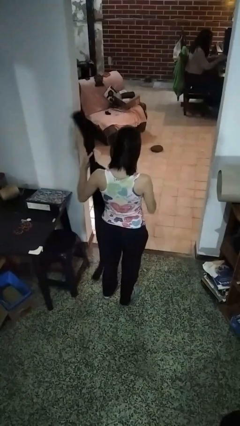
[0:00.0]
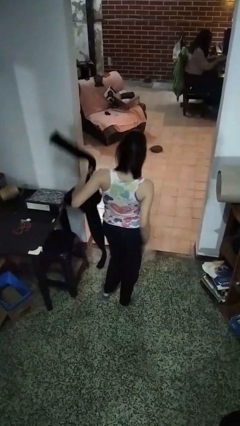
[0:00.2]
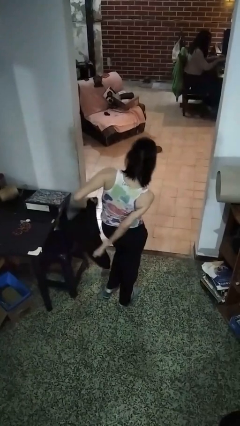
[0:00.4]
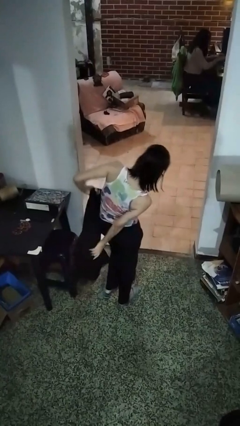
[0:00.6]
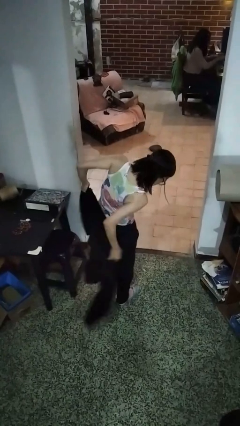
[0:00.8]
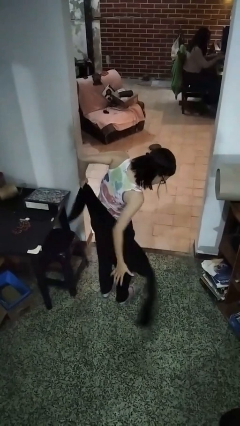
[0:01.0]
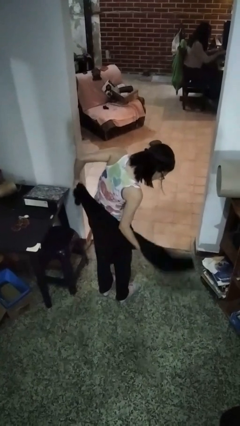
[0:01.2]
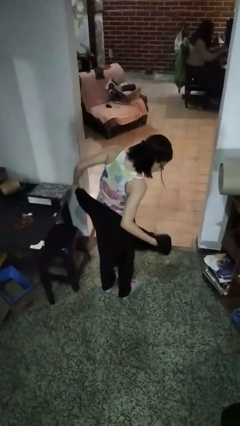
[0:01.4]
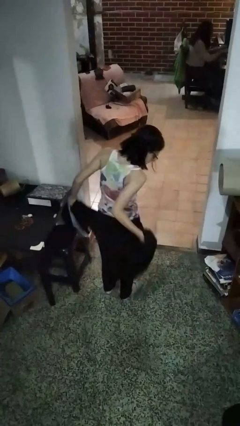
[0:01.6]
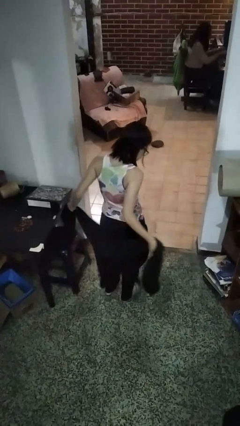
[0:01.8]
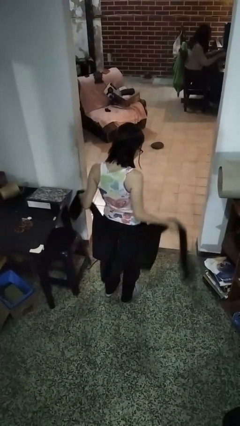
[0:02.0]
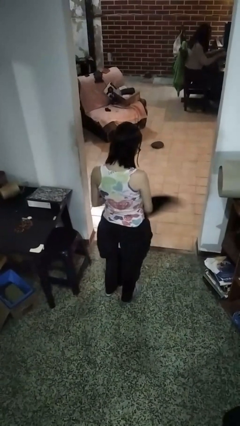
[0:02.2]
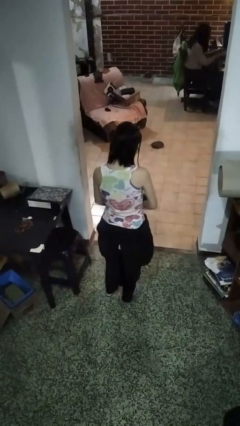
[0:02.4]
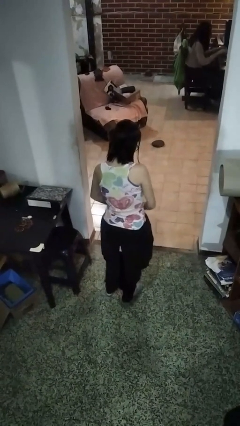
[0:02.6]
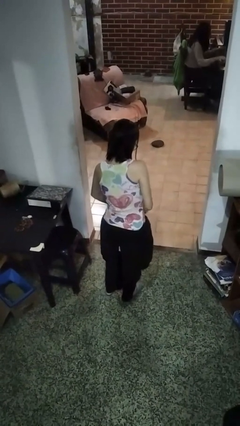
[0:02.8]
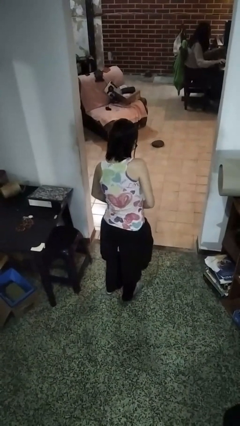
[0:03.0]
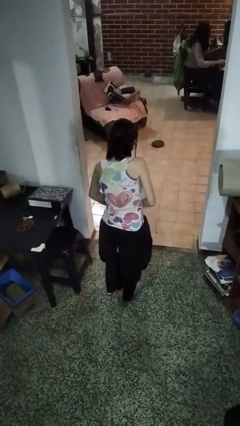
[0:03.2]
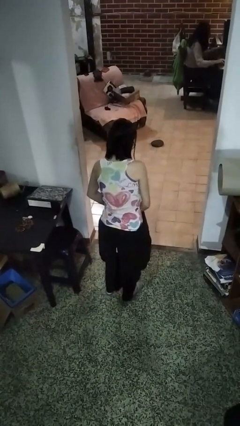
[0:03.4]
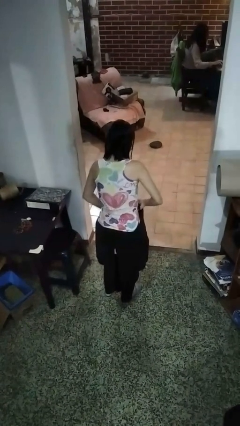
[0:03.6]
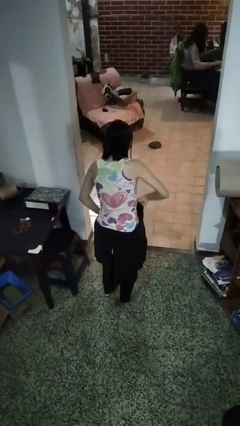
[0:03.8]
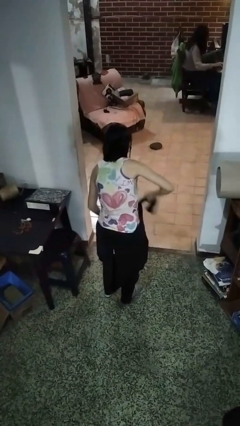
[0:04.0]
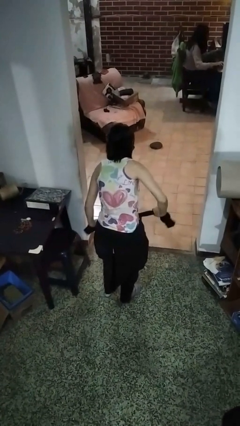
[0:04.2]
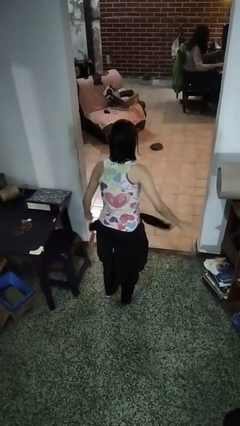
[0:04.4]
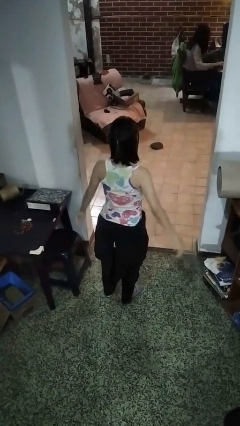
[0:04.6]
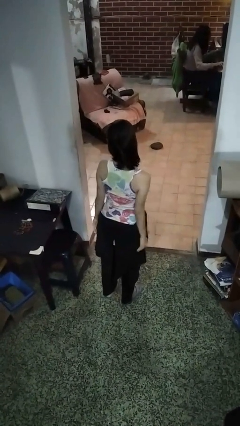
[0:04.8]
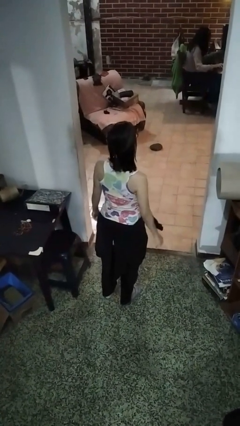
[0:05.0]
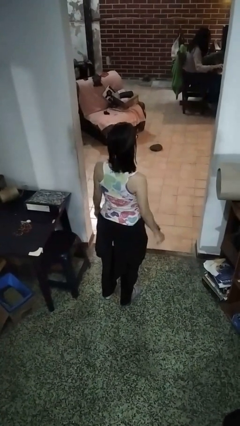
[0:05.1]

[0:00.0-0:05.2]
person ties jacket around waist

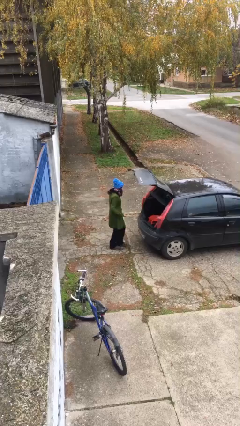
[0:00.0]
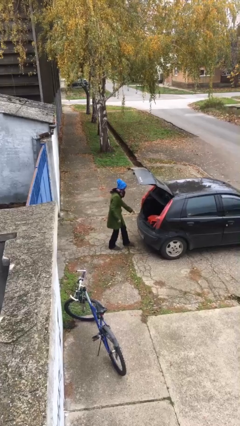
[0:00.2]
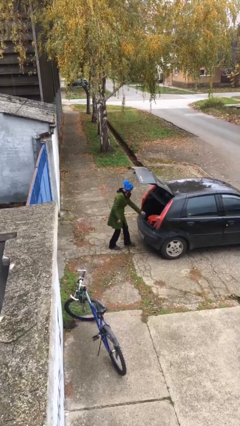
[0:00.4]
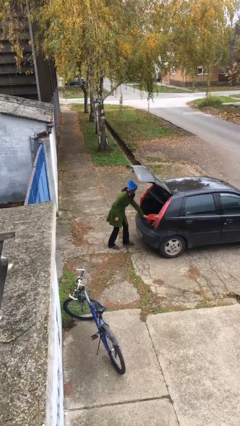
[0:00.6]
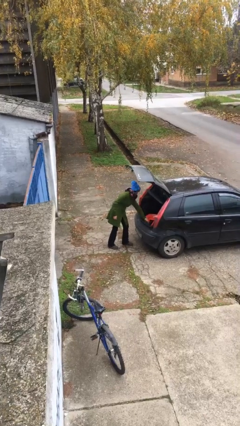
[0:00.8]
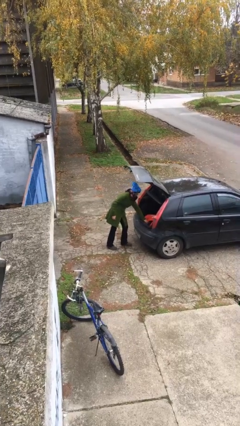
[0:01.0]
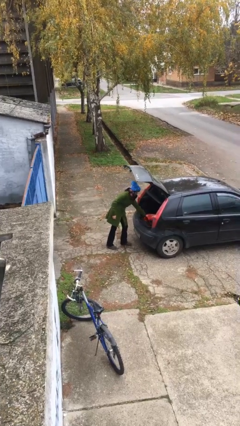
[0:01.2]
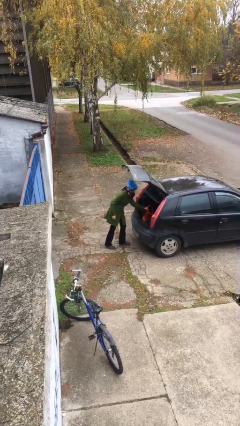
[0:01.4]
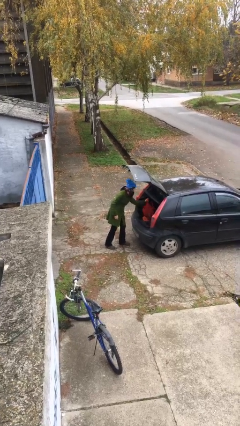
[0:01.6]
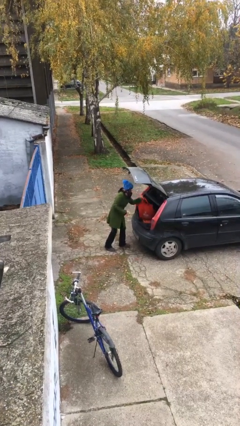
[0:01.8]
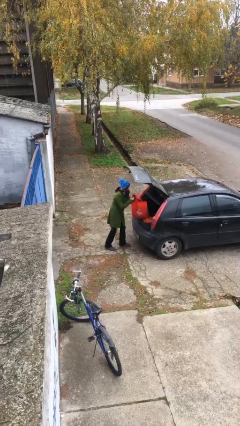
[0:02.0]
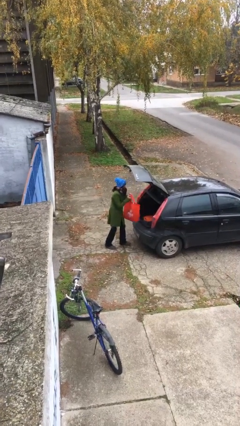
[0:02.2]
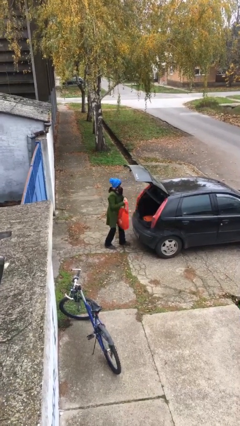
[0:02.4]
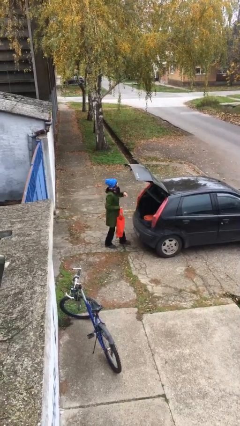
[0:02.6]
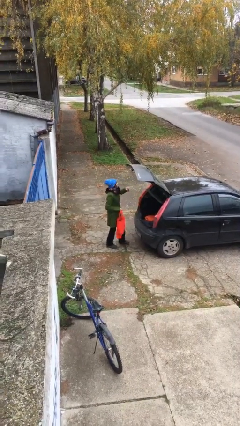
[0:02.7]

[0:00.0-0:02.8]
person unloads car

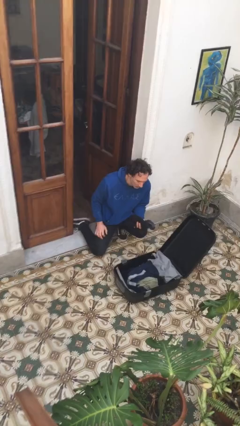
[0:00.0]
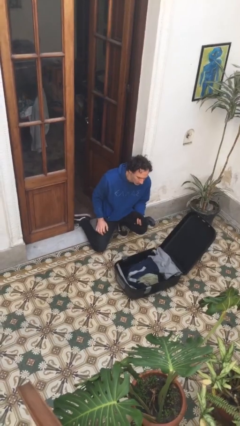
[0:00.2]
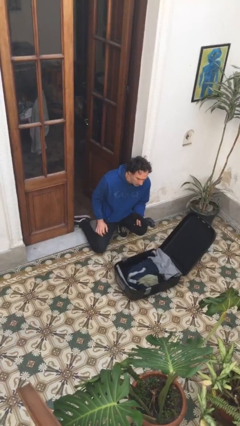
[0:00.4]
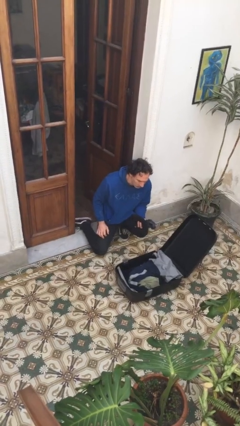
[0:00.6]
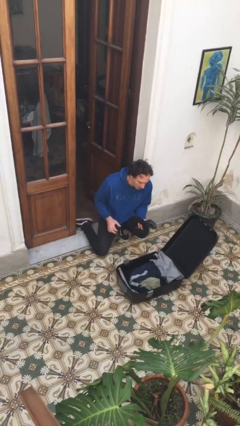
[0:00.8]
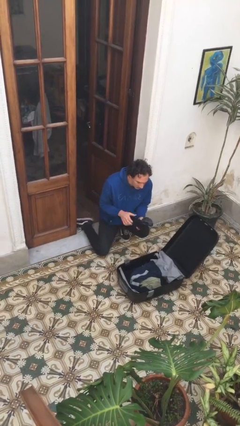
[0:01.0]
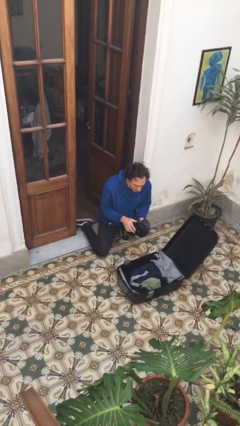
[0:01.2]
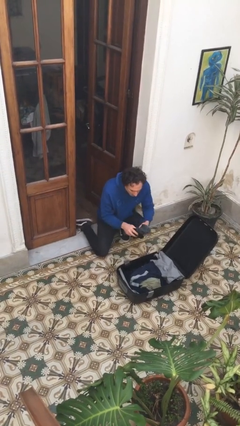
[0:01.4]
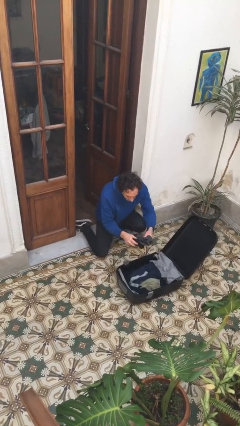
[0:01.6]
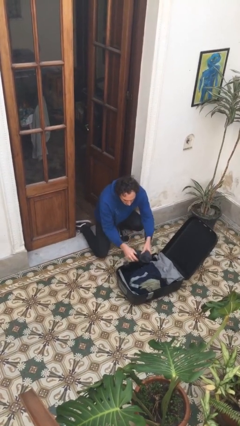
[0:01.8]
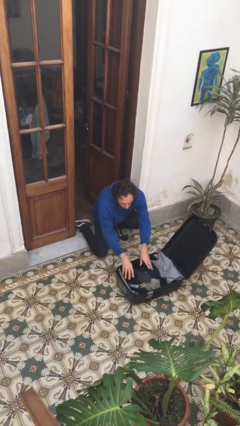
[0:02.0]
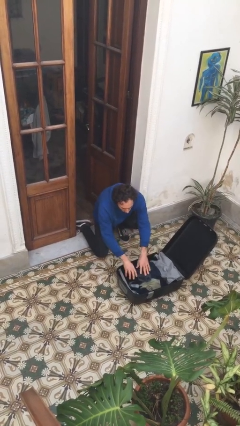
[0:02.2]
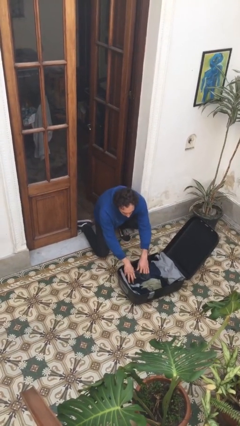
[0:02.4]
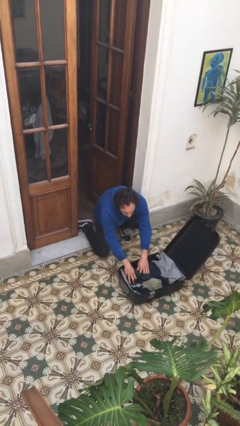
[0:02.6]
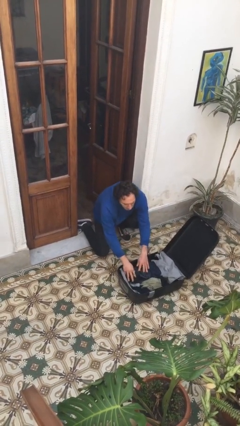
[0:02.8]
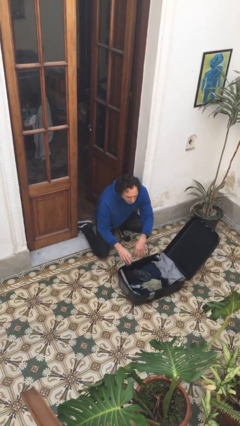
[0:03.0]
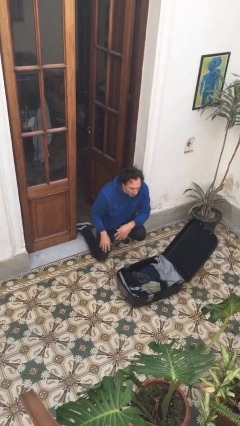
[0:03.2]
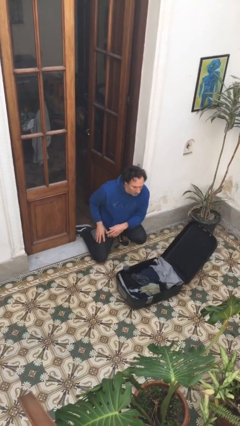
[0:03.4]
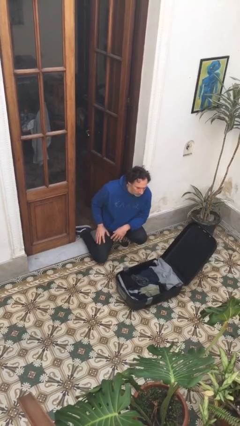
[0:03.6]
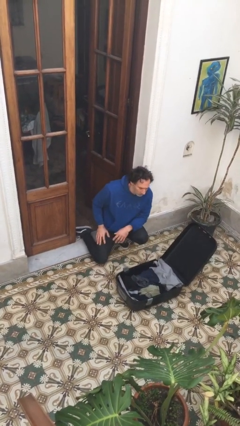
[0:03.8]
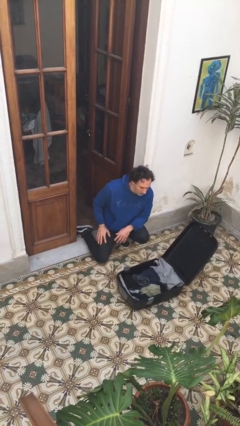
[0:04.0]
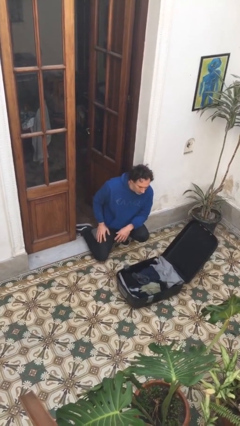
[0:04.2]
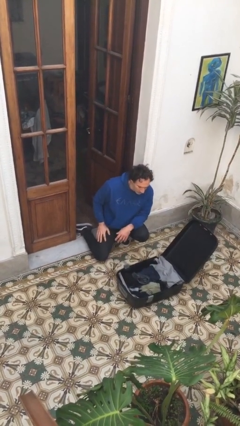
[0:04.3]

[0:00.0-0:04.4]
person loads clothes into suitcase

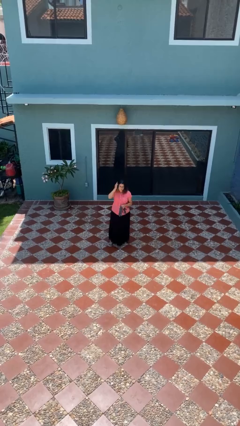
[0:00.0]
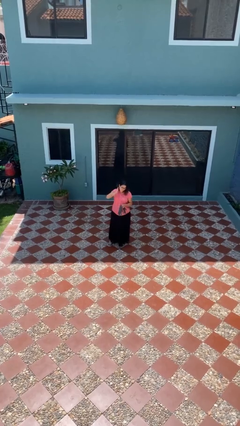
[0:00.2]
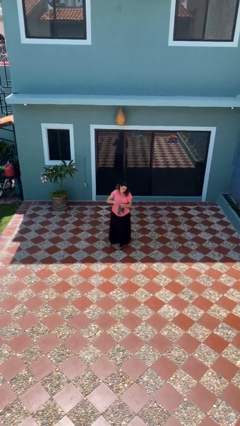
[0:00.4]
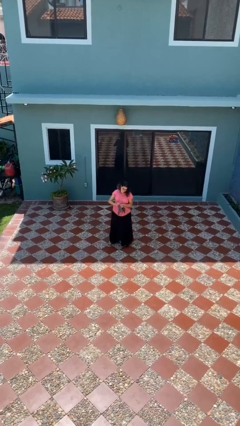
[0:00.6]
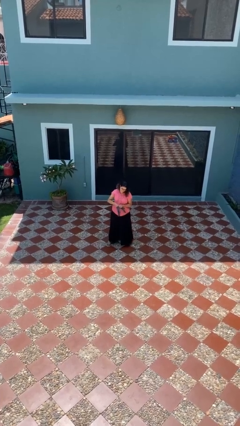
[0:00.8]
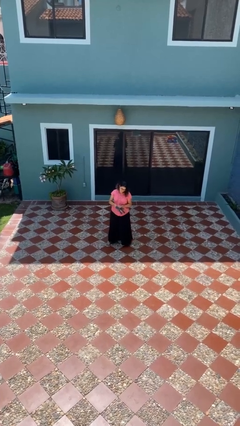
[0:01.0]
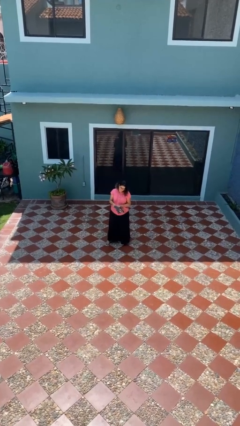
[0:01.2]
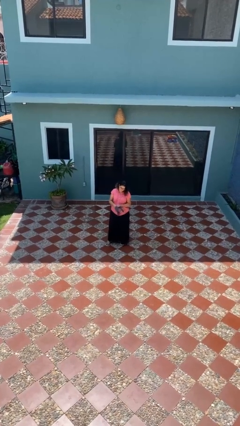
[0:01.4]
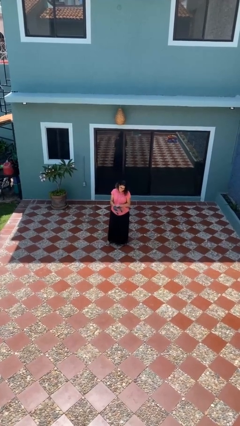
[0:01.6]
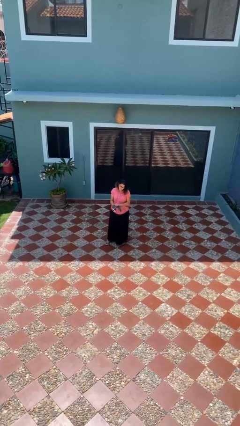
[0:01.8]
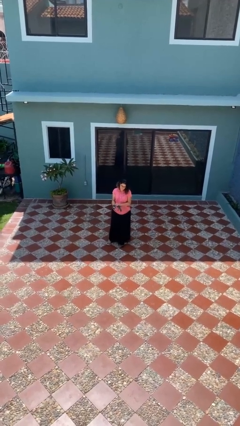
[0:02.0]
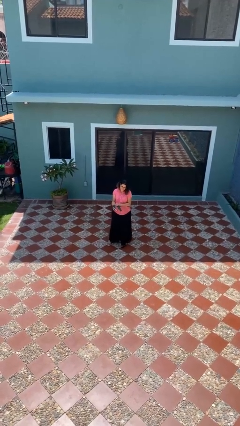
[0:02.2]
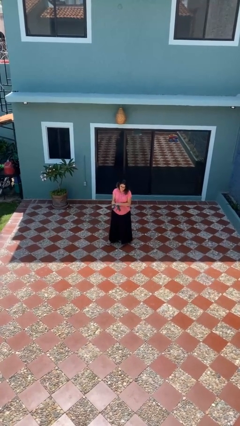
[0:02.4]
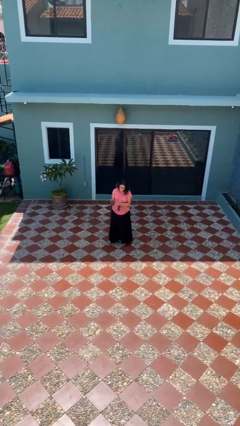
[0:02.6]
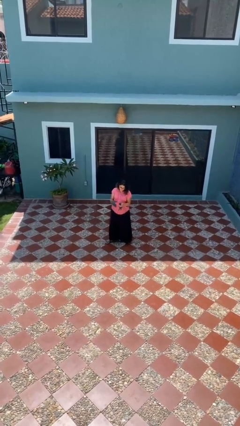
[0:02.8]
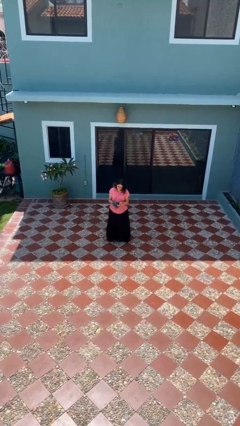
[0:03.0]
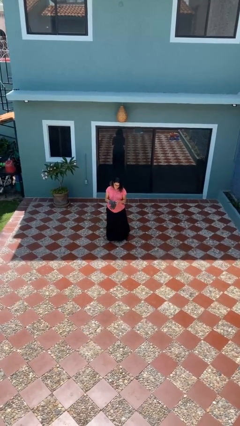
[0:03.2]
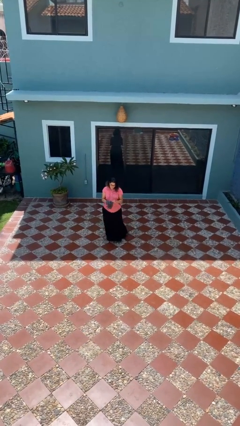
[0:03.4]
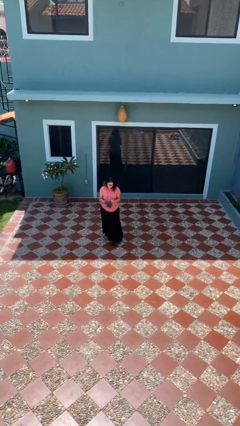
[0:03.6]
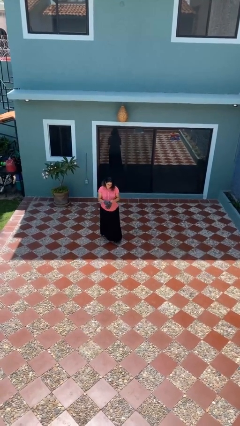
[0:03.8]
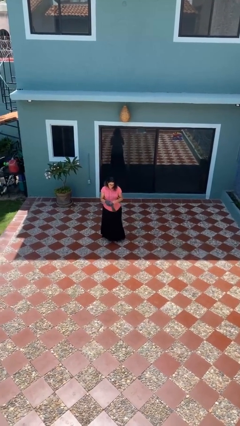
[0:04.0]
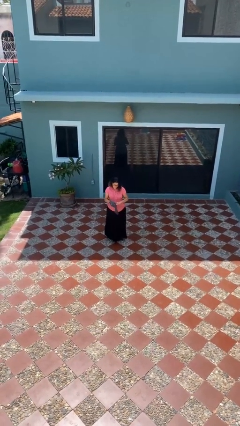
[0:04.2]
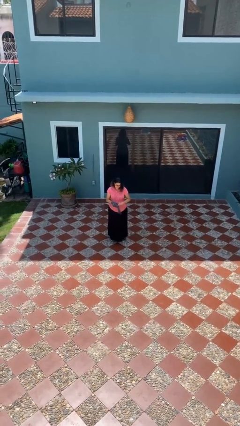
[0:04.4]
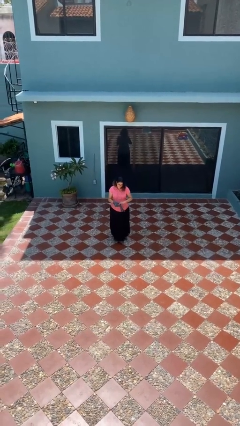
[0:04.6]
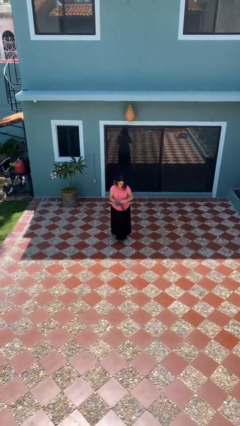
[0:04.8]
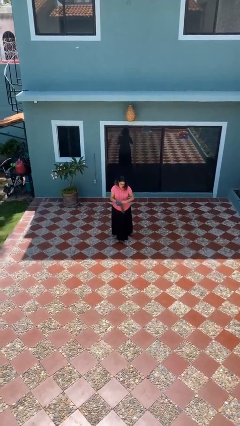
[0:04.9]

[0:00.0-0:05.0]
person puts on gloves

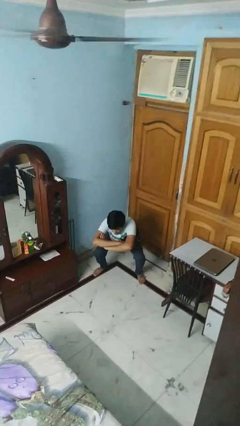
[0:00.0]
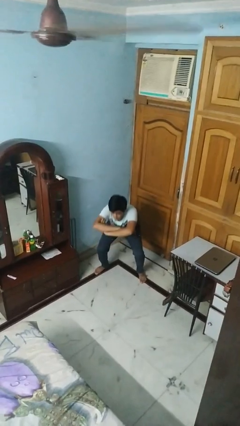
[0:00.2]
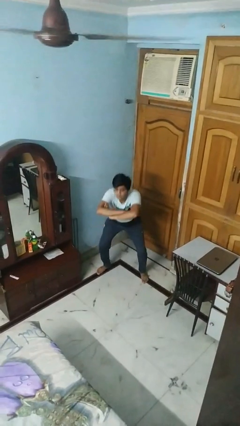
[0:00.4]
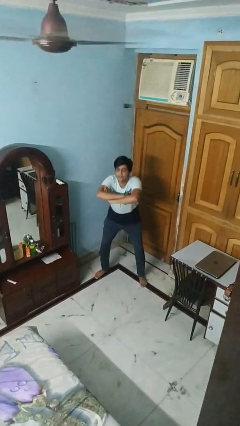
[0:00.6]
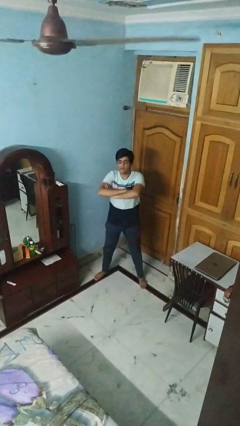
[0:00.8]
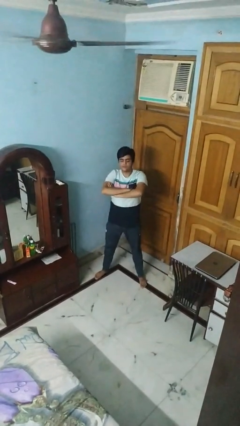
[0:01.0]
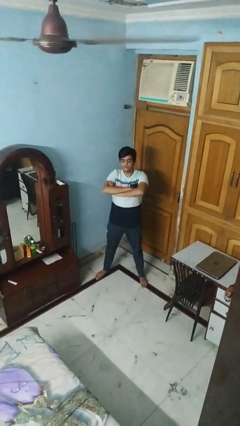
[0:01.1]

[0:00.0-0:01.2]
person stands up
